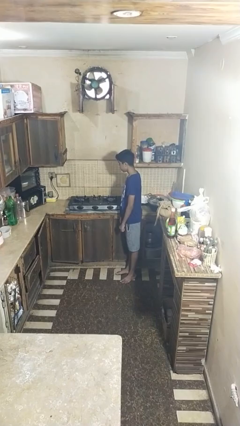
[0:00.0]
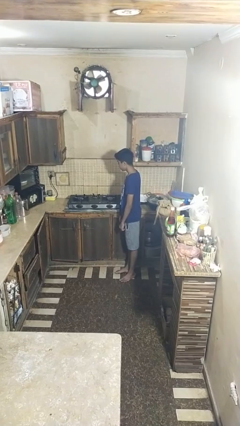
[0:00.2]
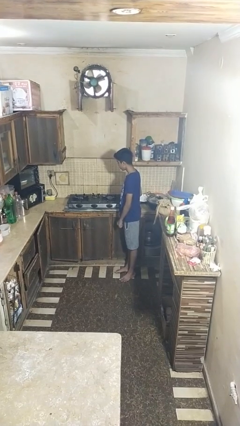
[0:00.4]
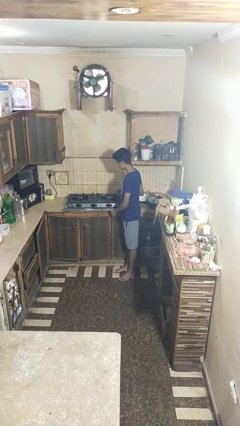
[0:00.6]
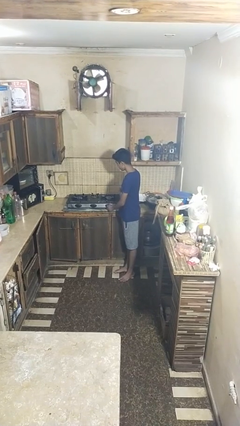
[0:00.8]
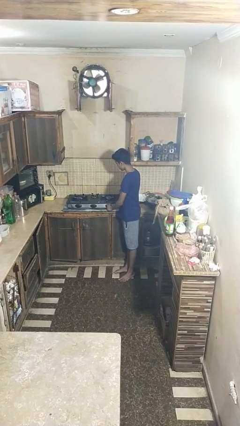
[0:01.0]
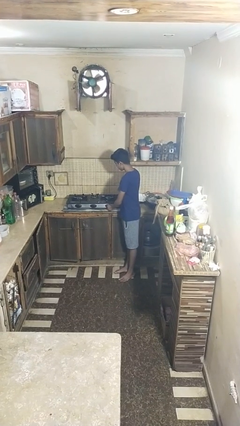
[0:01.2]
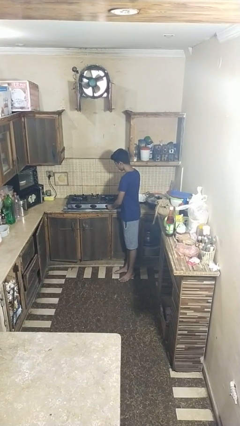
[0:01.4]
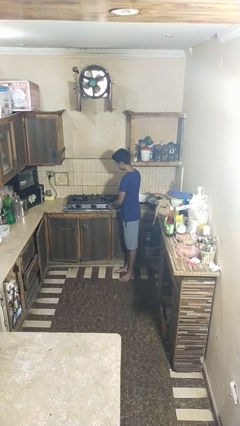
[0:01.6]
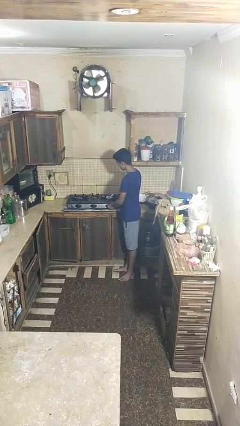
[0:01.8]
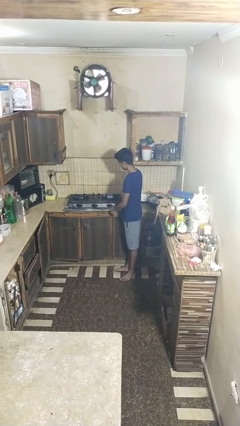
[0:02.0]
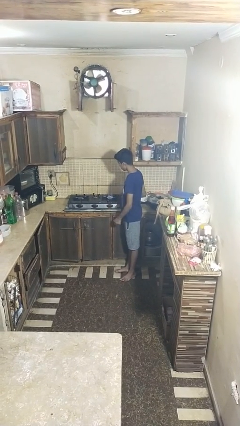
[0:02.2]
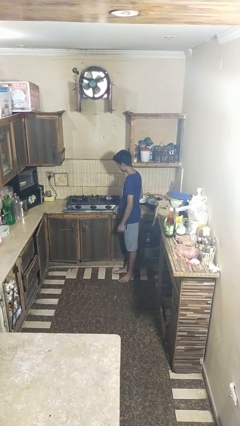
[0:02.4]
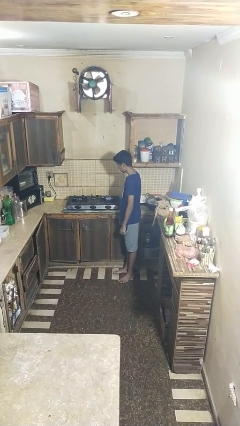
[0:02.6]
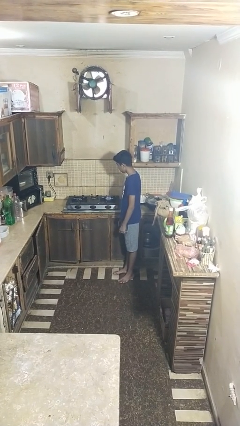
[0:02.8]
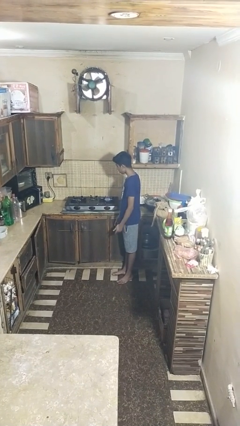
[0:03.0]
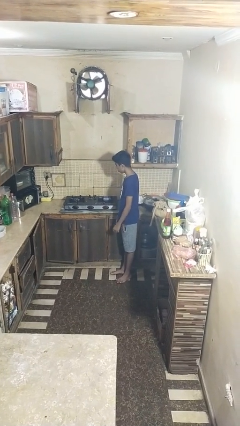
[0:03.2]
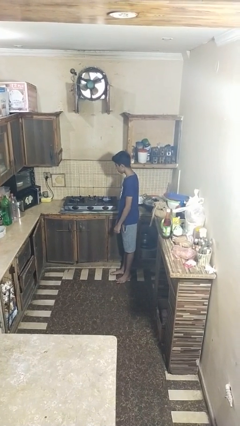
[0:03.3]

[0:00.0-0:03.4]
person turns on stovetop

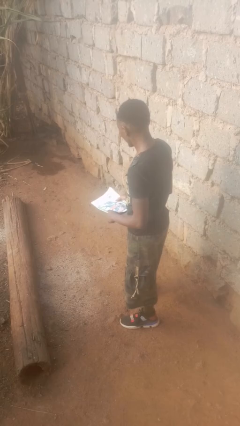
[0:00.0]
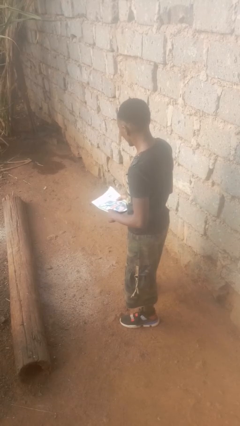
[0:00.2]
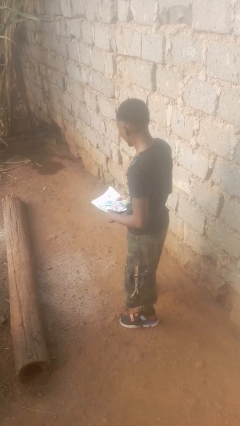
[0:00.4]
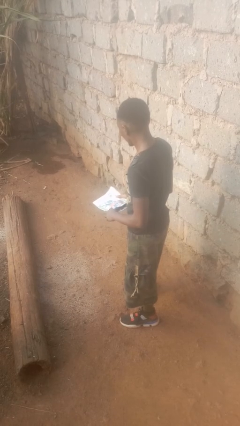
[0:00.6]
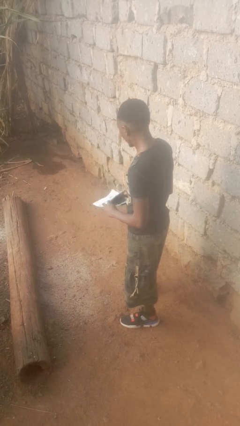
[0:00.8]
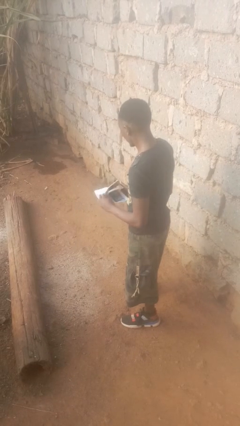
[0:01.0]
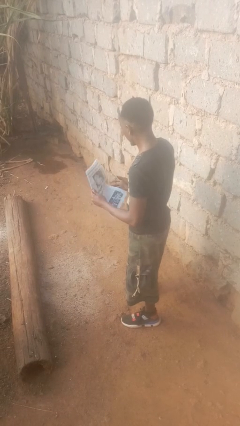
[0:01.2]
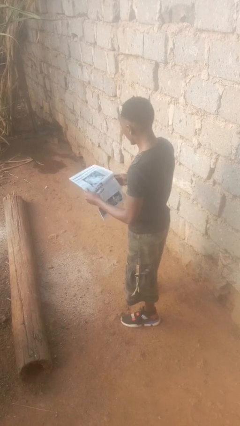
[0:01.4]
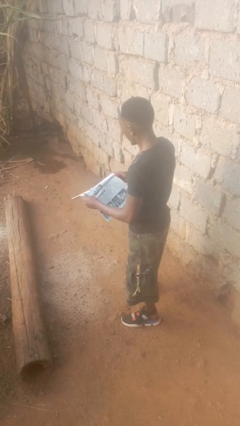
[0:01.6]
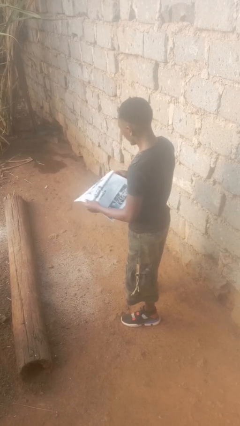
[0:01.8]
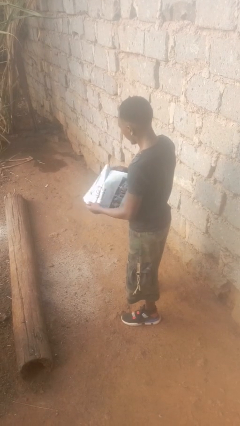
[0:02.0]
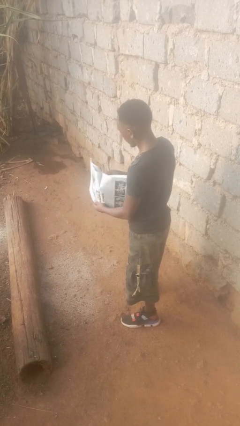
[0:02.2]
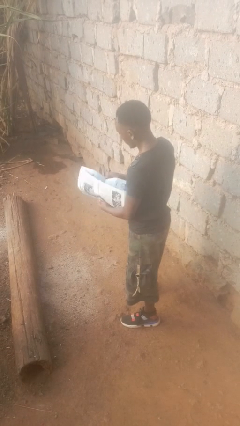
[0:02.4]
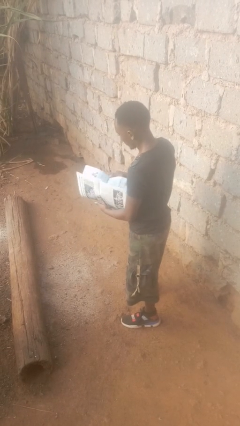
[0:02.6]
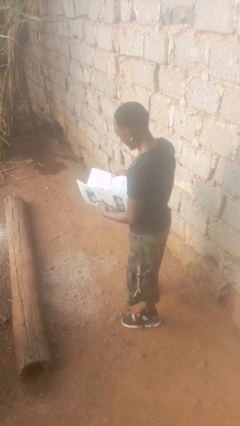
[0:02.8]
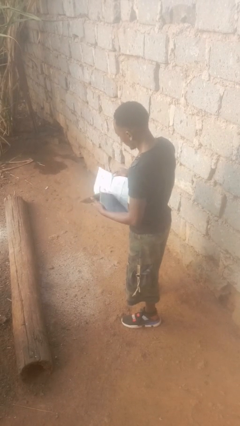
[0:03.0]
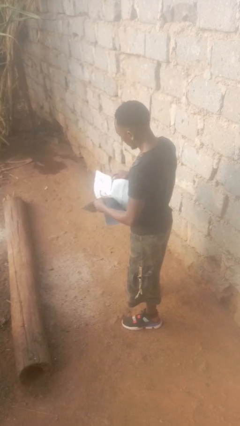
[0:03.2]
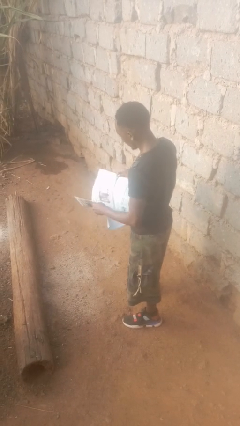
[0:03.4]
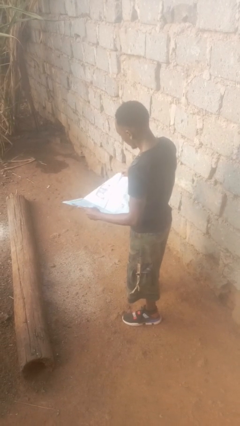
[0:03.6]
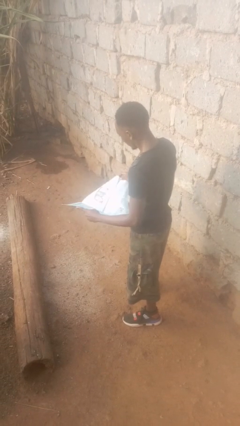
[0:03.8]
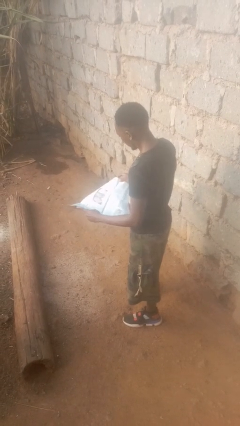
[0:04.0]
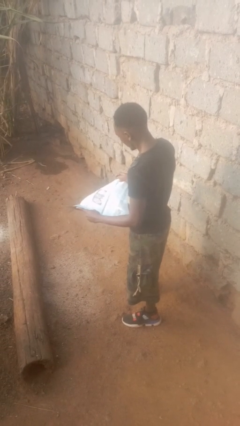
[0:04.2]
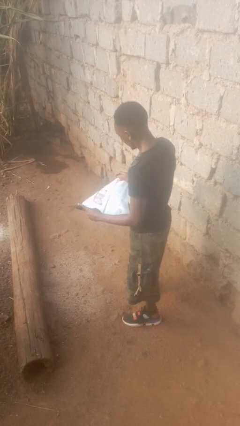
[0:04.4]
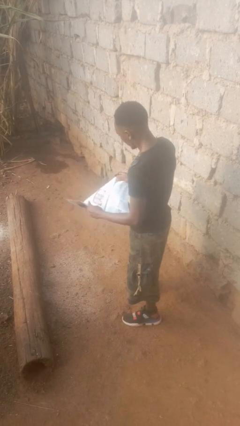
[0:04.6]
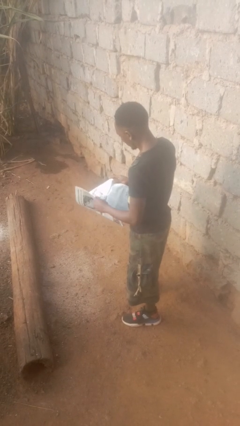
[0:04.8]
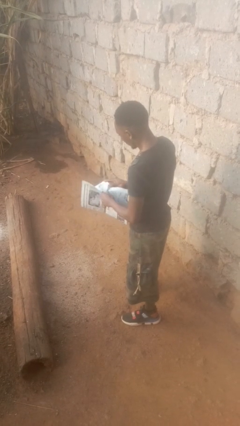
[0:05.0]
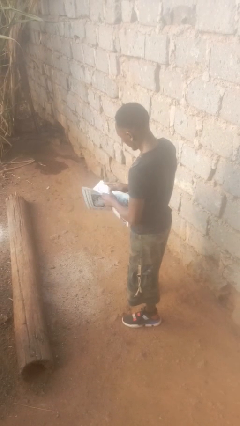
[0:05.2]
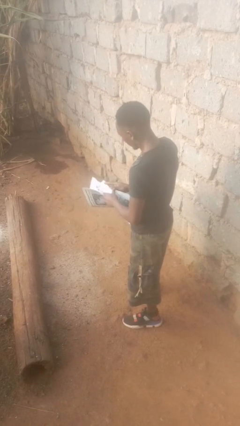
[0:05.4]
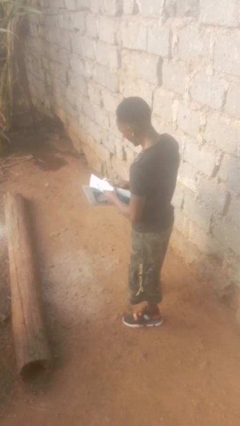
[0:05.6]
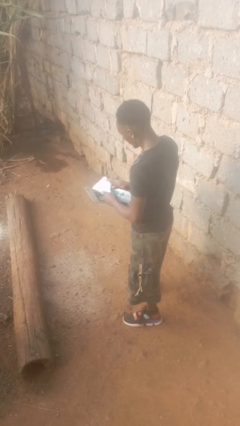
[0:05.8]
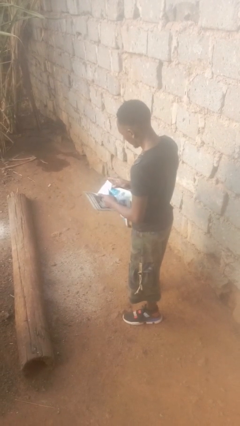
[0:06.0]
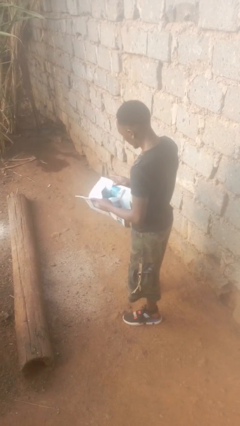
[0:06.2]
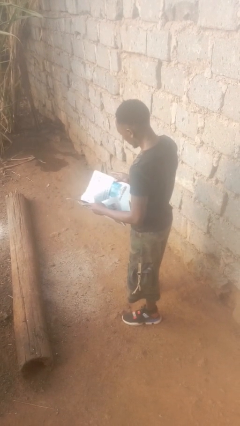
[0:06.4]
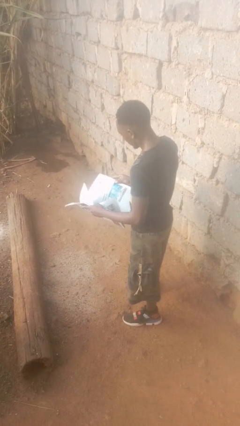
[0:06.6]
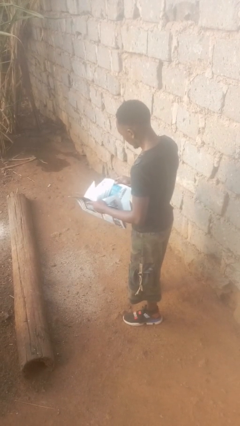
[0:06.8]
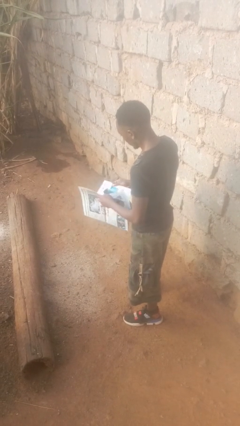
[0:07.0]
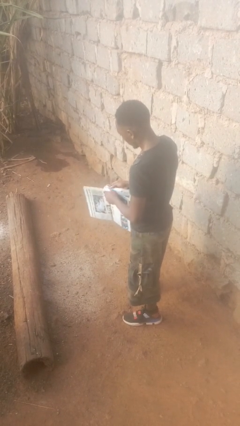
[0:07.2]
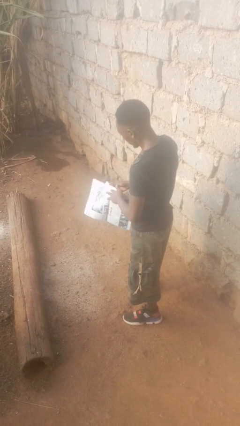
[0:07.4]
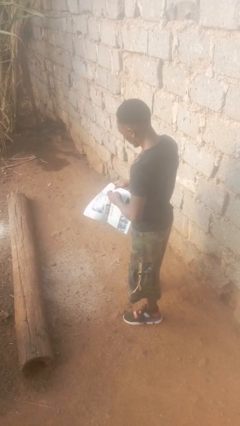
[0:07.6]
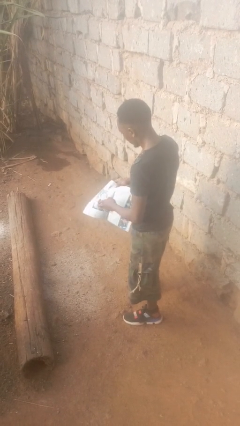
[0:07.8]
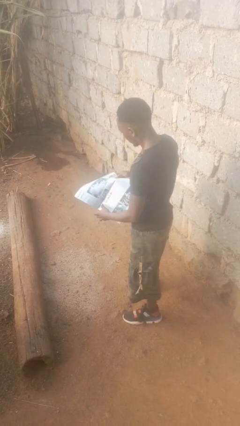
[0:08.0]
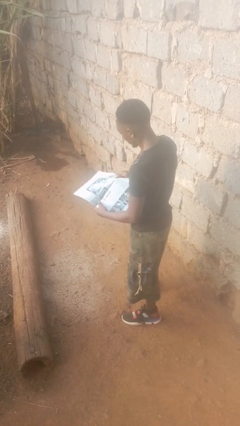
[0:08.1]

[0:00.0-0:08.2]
person reads newspaper

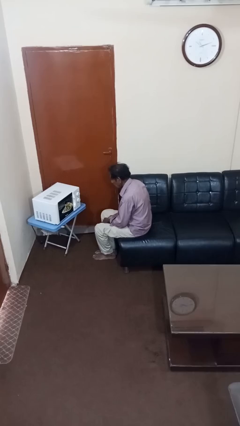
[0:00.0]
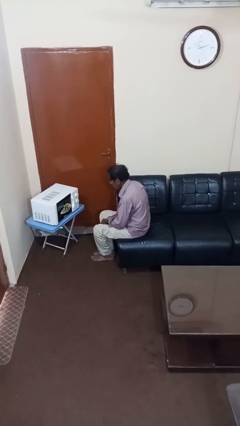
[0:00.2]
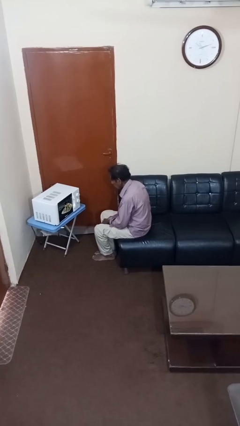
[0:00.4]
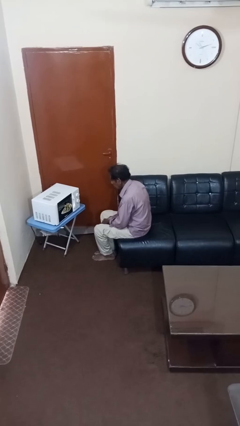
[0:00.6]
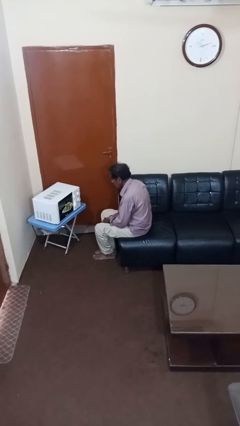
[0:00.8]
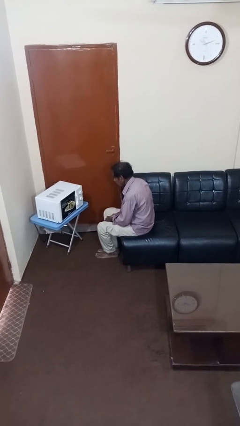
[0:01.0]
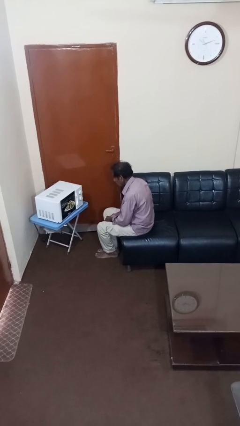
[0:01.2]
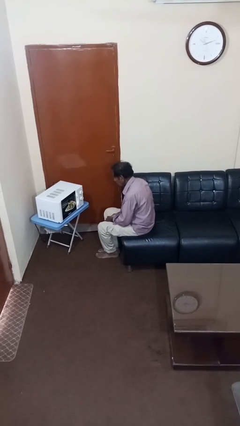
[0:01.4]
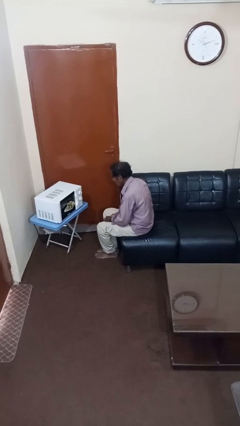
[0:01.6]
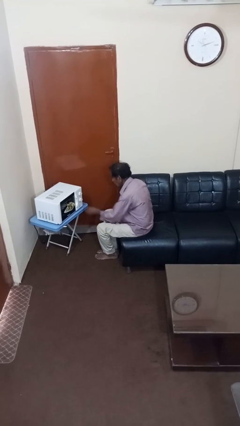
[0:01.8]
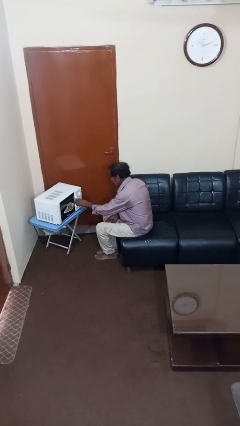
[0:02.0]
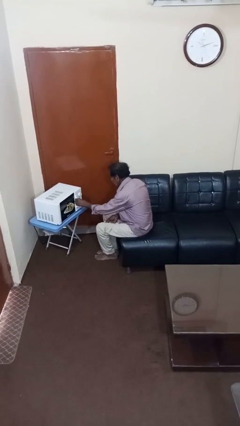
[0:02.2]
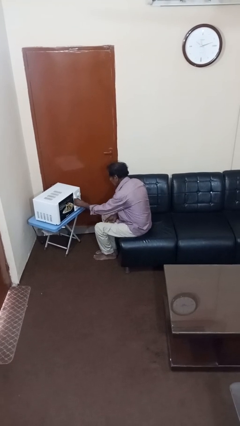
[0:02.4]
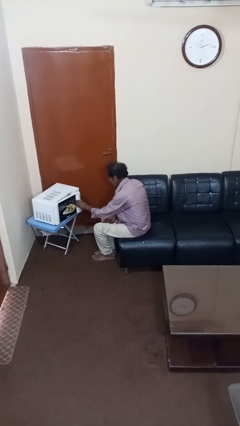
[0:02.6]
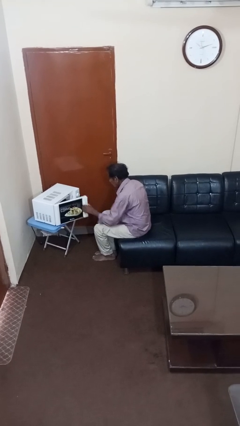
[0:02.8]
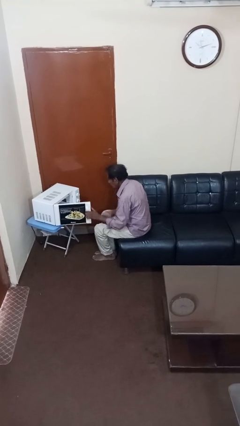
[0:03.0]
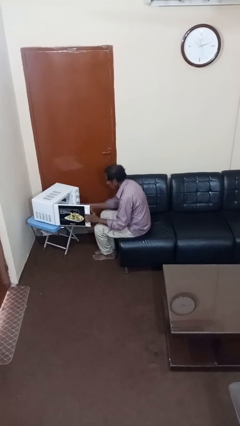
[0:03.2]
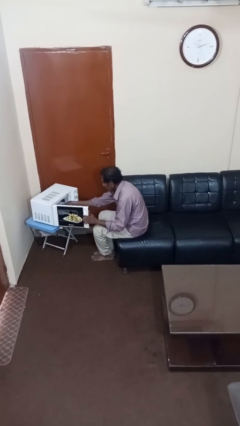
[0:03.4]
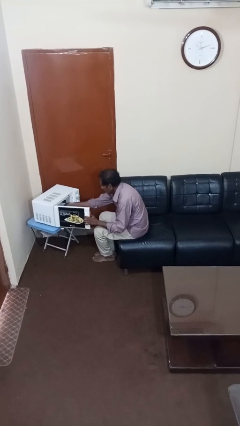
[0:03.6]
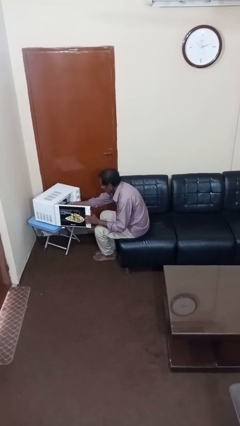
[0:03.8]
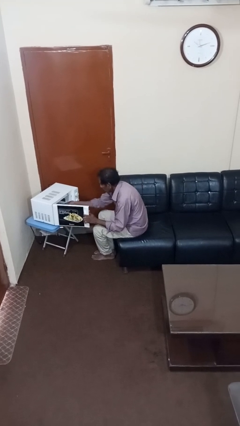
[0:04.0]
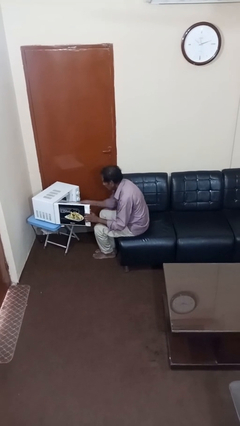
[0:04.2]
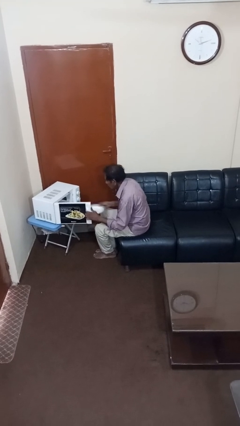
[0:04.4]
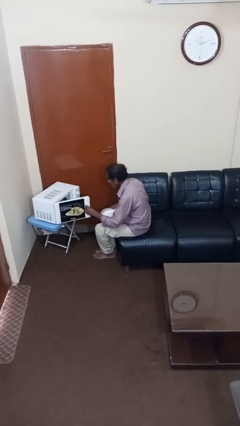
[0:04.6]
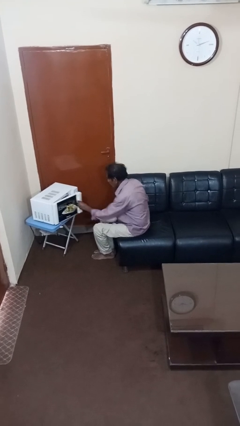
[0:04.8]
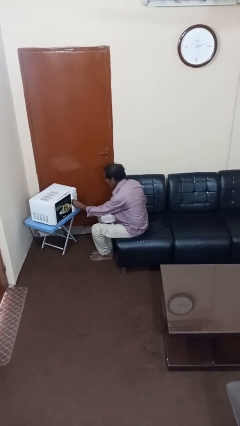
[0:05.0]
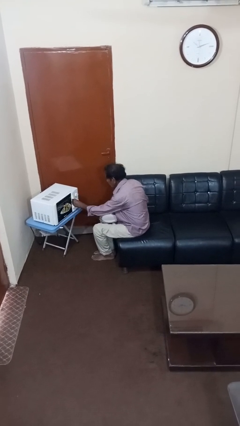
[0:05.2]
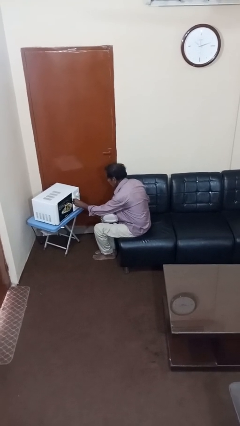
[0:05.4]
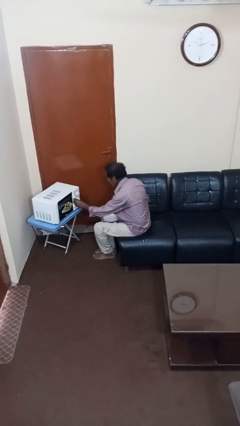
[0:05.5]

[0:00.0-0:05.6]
person takes object from microwave

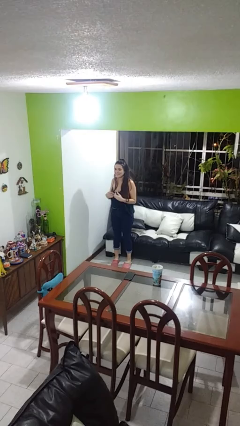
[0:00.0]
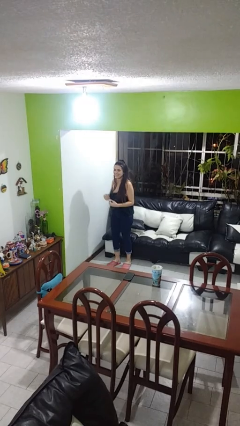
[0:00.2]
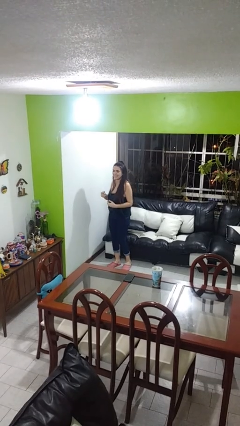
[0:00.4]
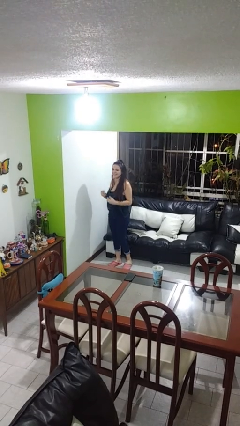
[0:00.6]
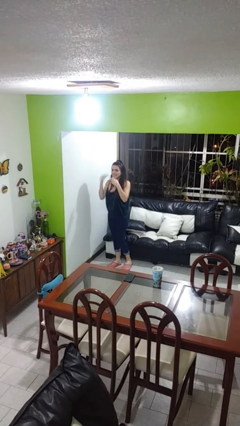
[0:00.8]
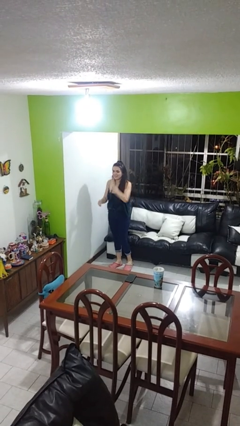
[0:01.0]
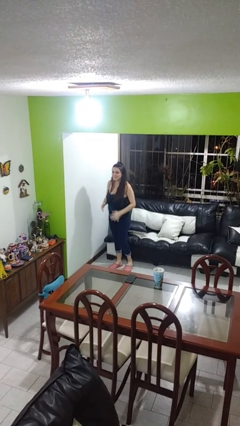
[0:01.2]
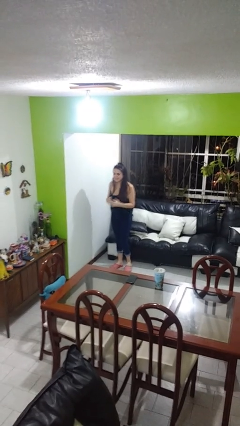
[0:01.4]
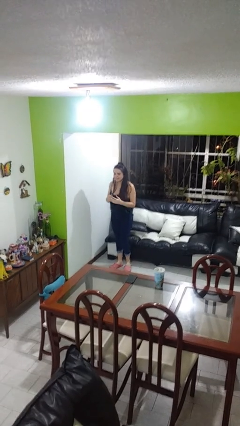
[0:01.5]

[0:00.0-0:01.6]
person karate chop
